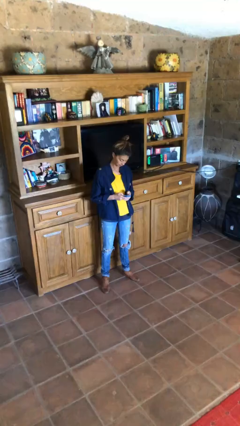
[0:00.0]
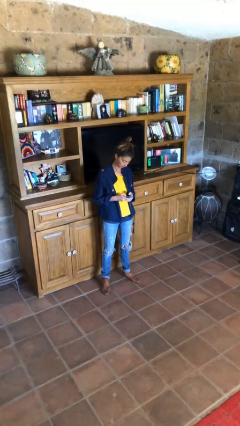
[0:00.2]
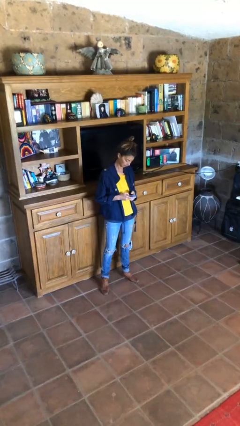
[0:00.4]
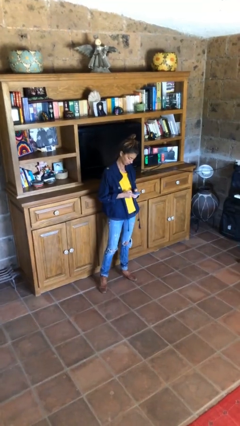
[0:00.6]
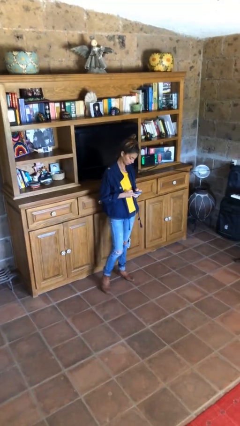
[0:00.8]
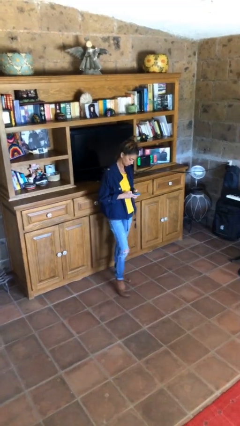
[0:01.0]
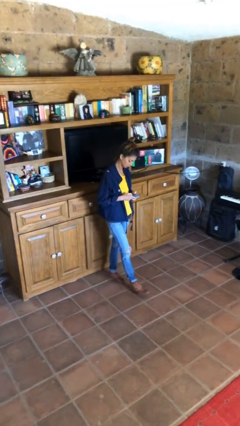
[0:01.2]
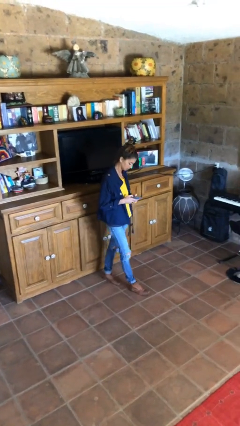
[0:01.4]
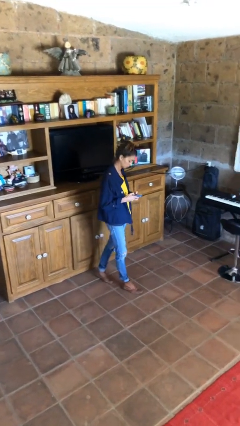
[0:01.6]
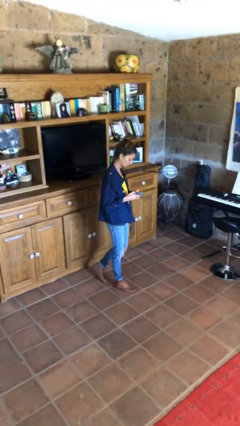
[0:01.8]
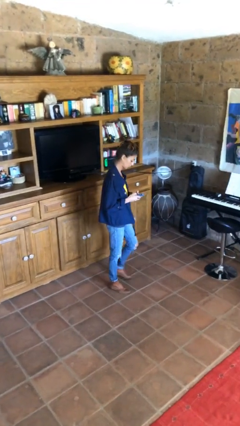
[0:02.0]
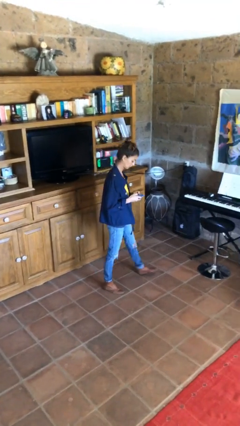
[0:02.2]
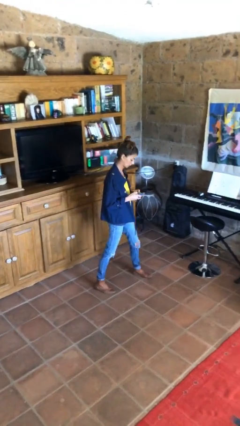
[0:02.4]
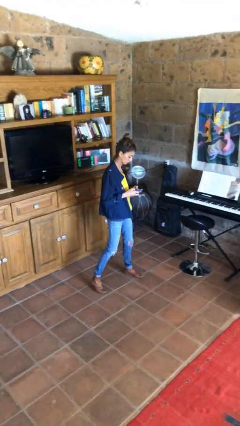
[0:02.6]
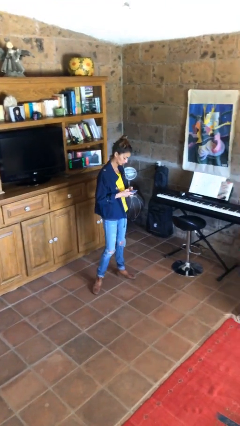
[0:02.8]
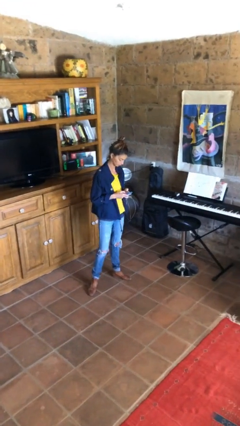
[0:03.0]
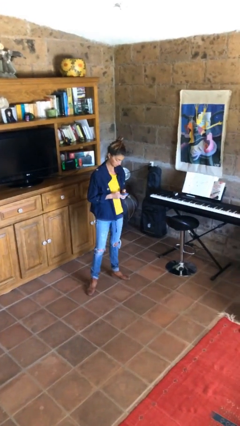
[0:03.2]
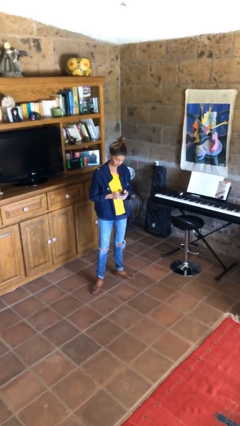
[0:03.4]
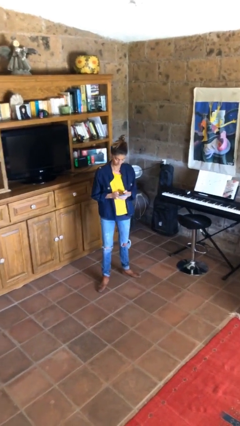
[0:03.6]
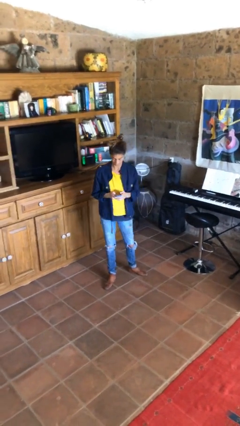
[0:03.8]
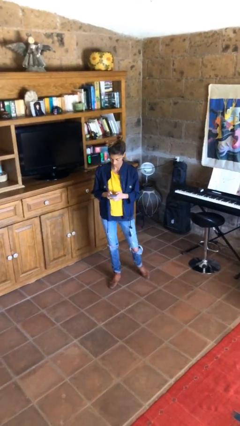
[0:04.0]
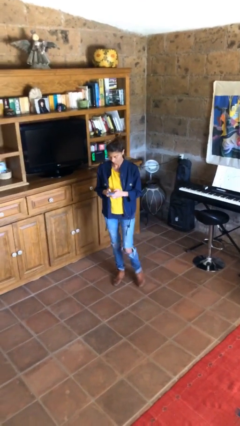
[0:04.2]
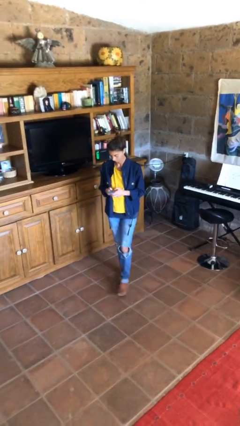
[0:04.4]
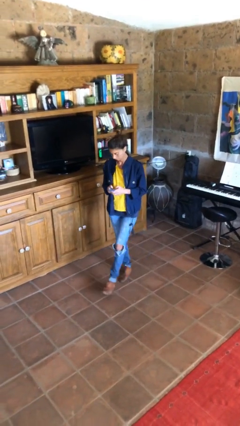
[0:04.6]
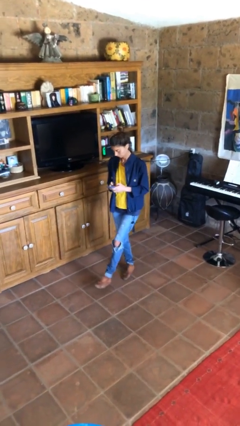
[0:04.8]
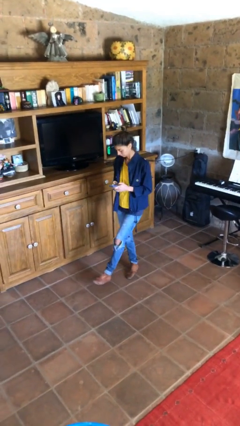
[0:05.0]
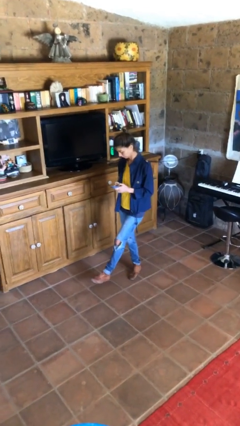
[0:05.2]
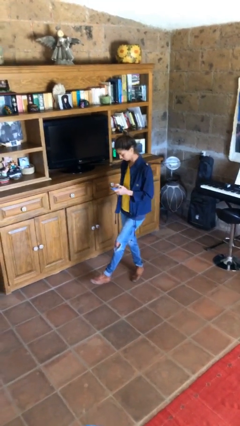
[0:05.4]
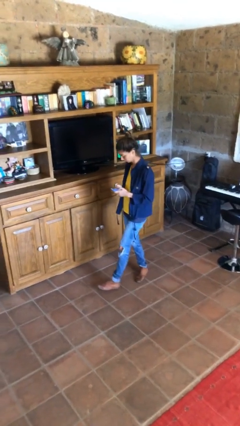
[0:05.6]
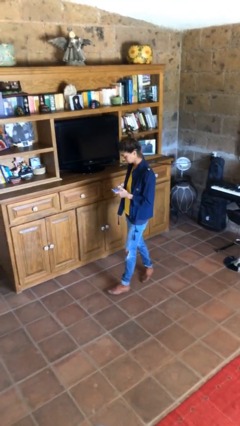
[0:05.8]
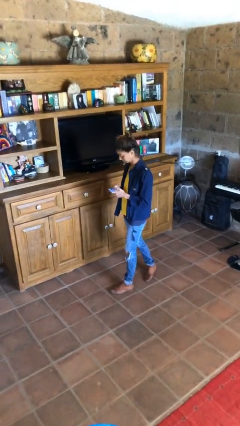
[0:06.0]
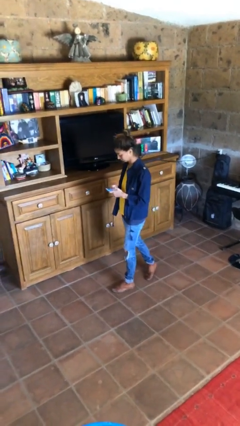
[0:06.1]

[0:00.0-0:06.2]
person texts on phone

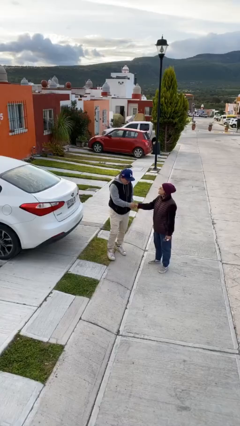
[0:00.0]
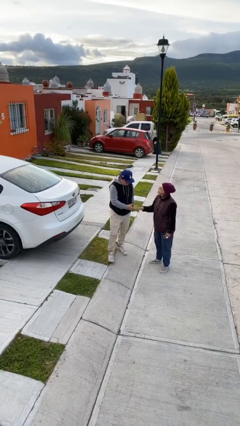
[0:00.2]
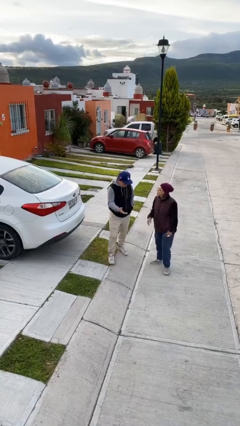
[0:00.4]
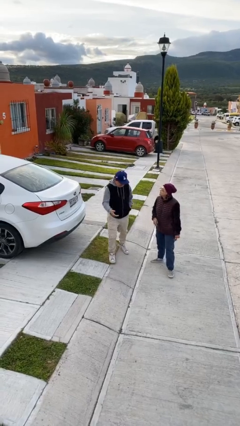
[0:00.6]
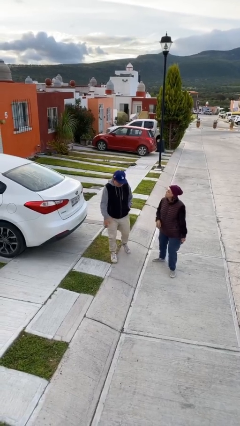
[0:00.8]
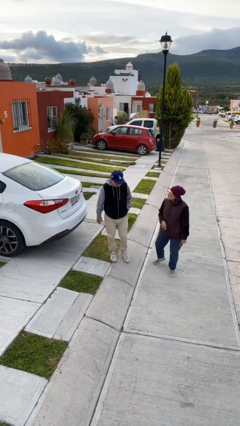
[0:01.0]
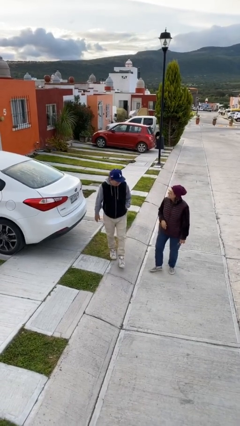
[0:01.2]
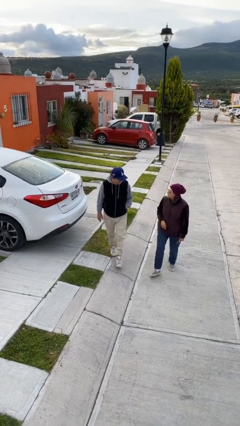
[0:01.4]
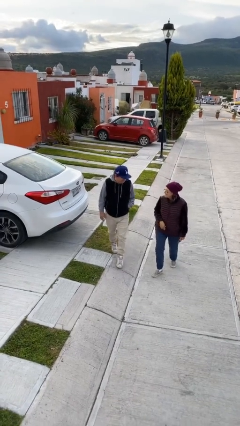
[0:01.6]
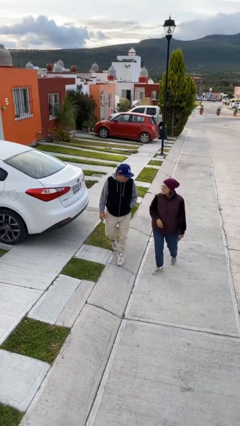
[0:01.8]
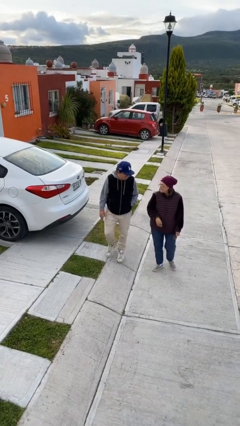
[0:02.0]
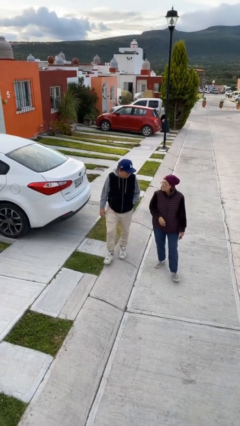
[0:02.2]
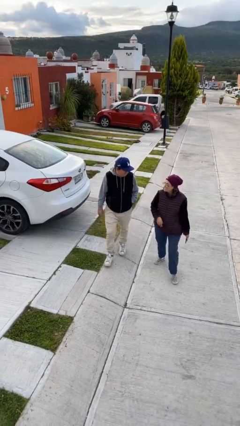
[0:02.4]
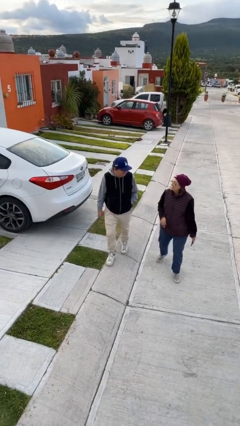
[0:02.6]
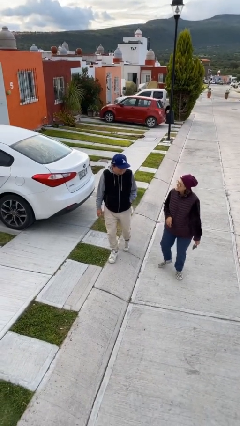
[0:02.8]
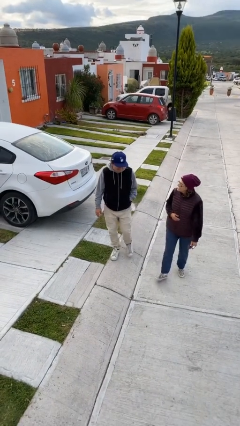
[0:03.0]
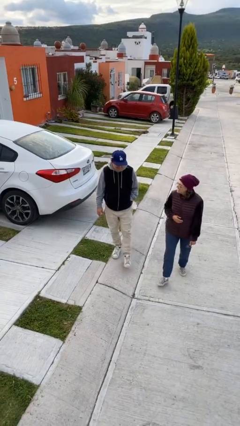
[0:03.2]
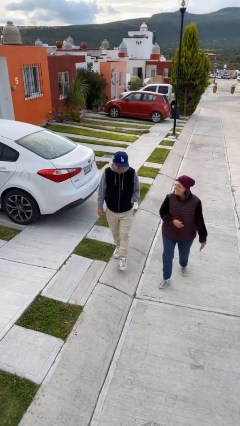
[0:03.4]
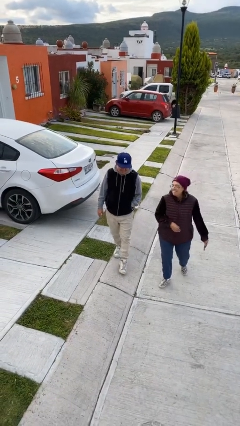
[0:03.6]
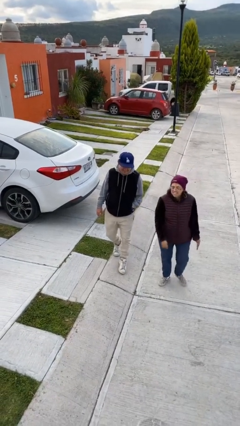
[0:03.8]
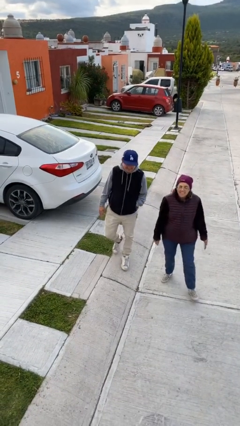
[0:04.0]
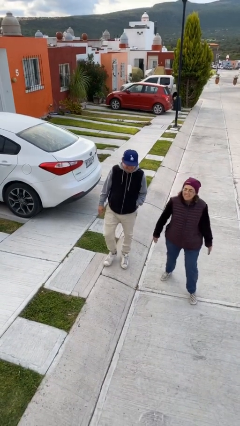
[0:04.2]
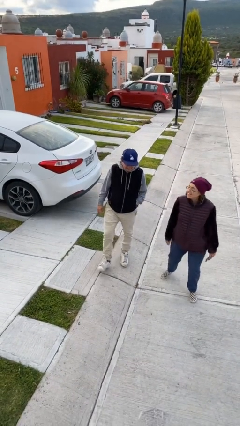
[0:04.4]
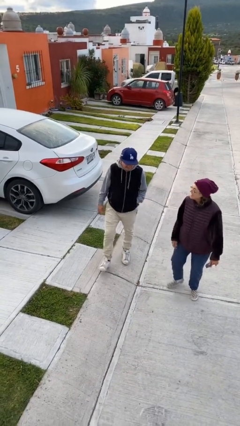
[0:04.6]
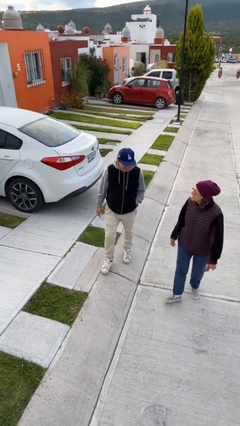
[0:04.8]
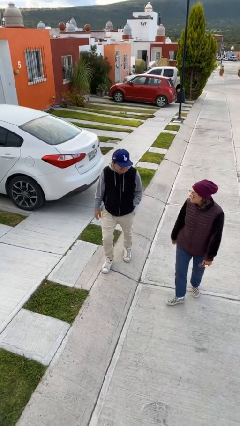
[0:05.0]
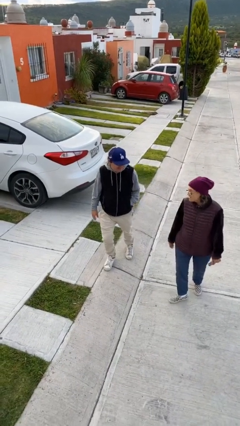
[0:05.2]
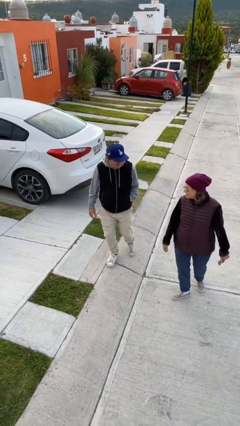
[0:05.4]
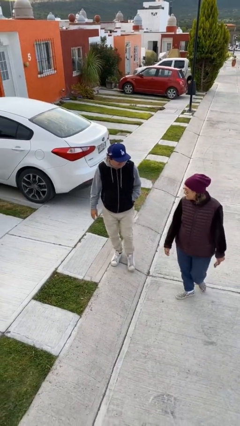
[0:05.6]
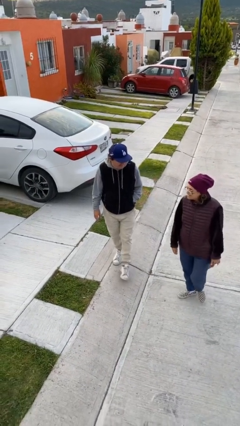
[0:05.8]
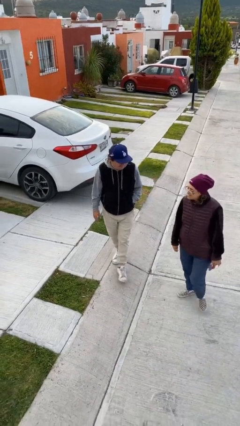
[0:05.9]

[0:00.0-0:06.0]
person talks to person

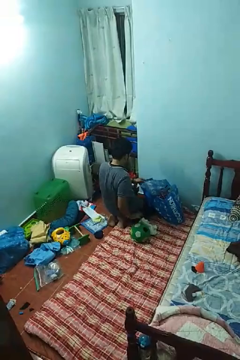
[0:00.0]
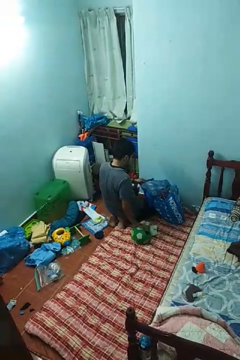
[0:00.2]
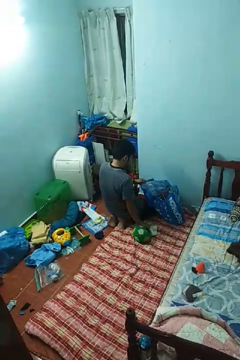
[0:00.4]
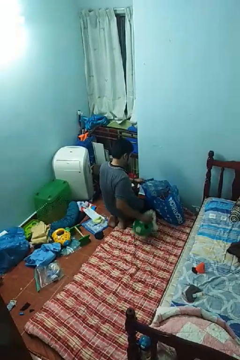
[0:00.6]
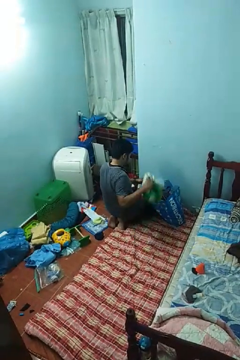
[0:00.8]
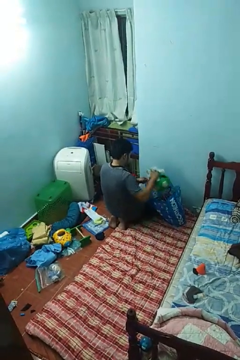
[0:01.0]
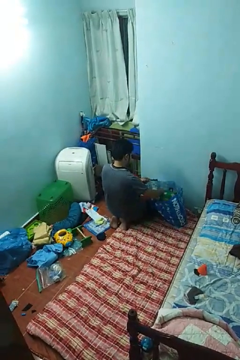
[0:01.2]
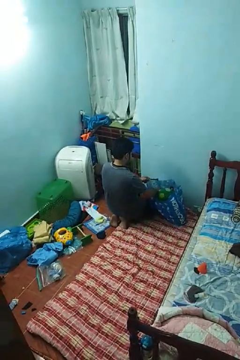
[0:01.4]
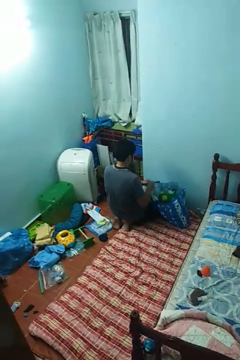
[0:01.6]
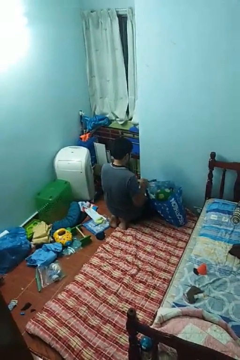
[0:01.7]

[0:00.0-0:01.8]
person puts object into bag

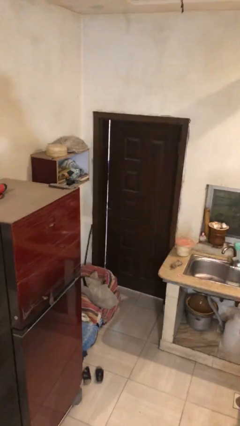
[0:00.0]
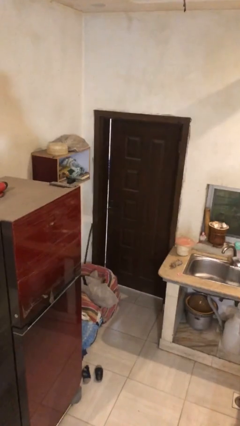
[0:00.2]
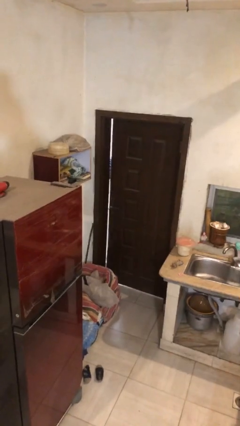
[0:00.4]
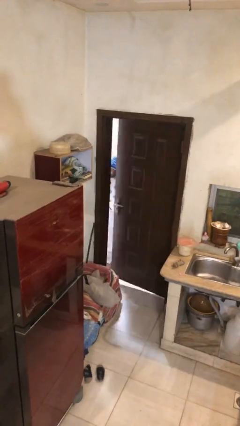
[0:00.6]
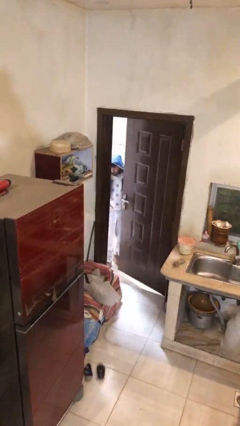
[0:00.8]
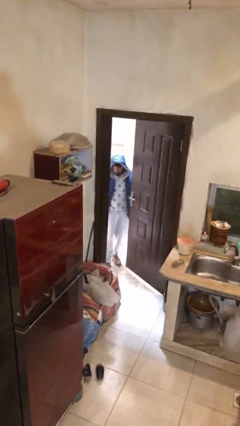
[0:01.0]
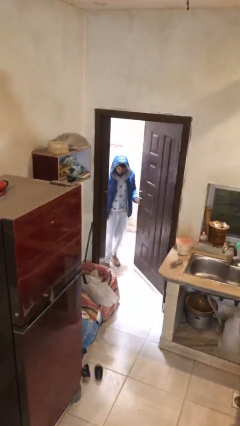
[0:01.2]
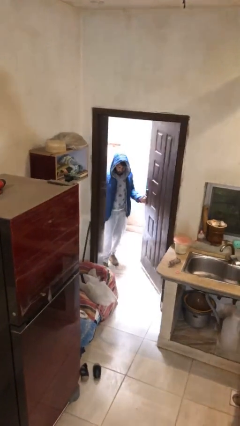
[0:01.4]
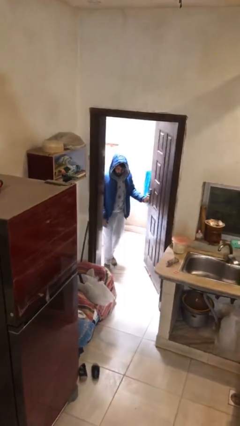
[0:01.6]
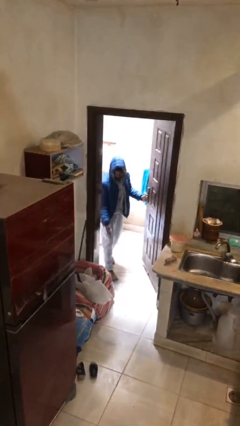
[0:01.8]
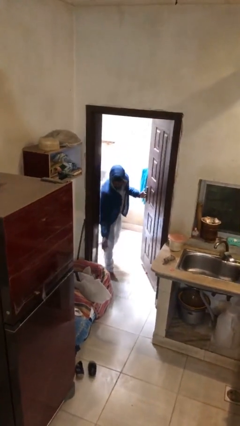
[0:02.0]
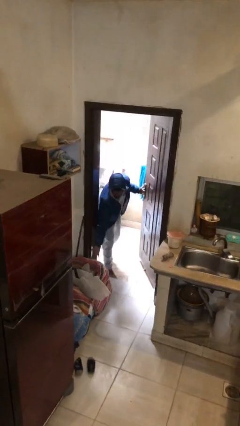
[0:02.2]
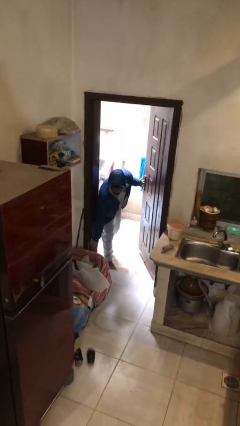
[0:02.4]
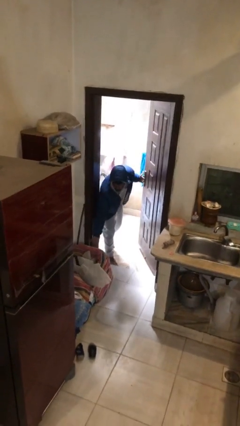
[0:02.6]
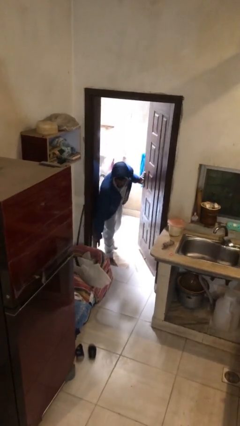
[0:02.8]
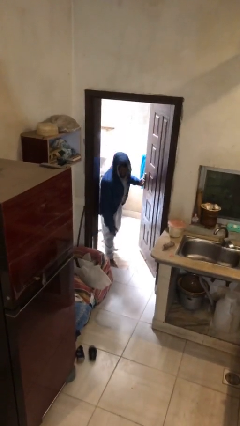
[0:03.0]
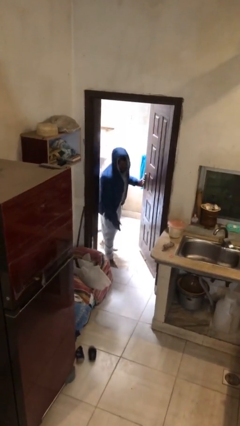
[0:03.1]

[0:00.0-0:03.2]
person opens facility door

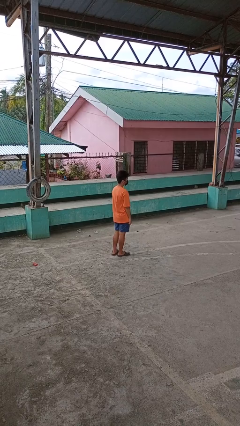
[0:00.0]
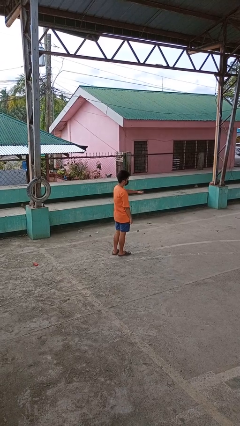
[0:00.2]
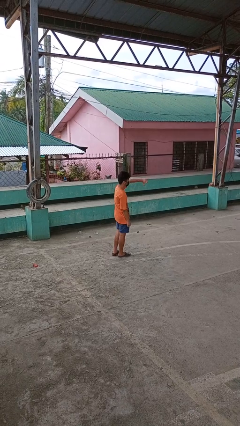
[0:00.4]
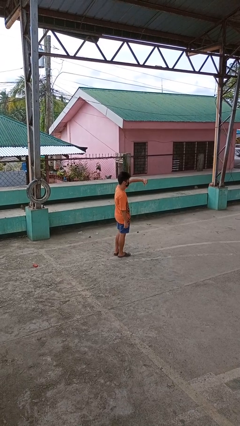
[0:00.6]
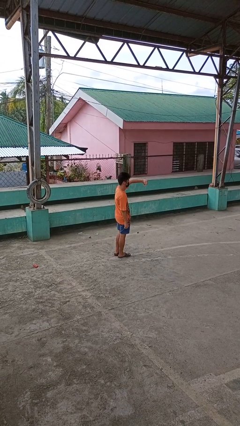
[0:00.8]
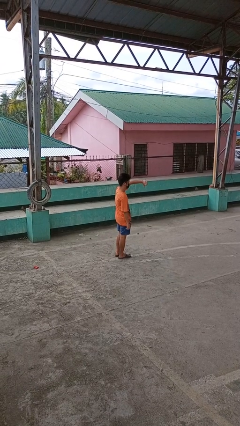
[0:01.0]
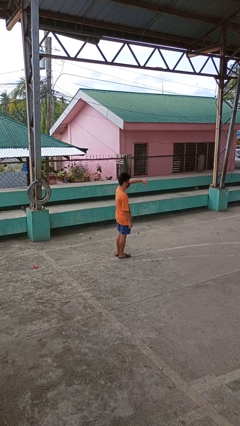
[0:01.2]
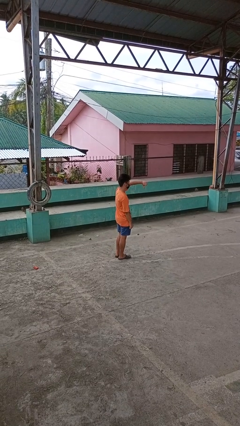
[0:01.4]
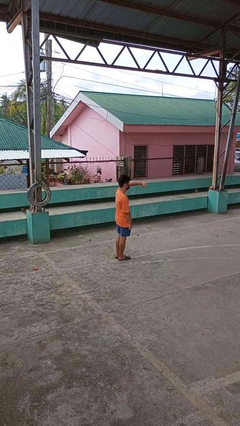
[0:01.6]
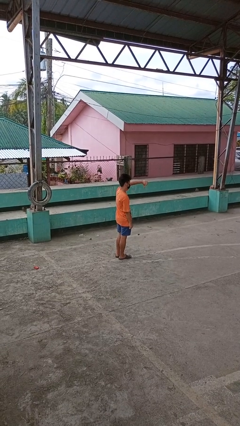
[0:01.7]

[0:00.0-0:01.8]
person gestures thumbs down
